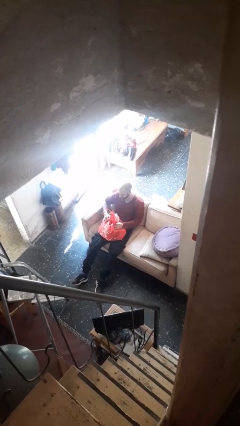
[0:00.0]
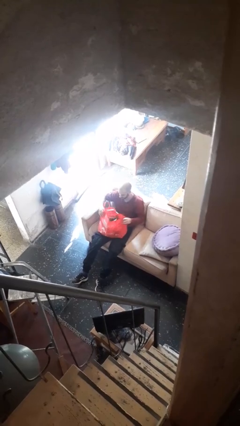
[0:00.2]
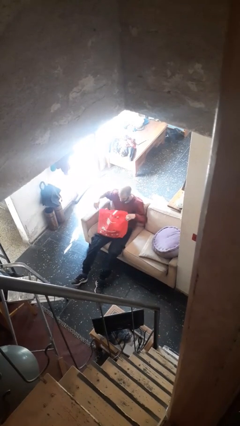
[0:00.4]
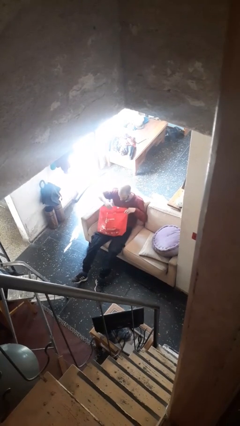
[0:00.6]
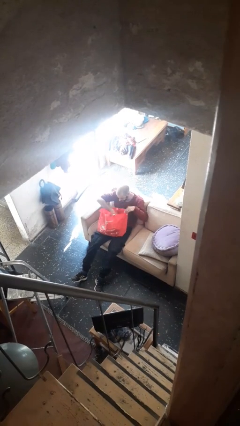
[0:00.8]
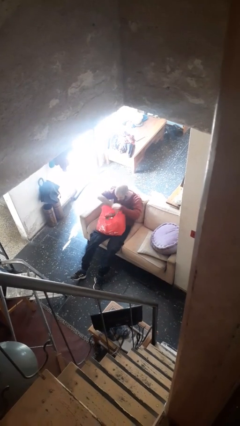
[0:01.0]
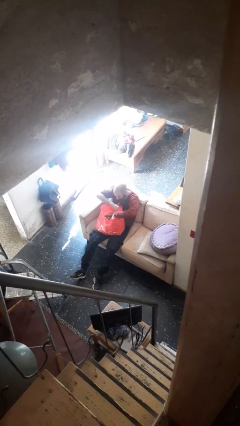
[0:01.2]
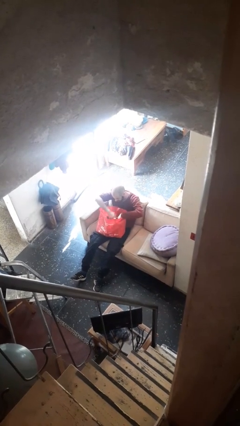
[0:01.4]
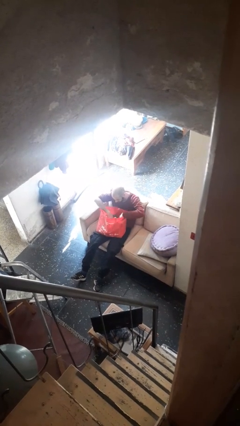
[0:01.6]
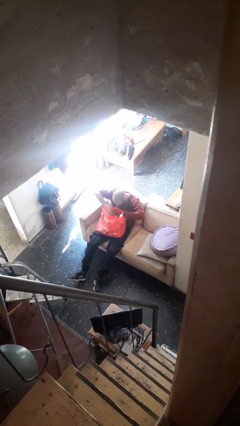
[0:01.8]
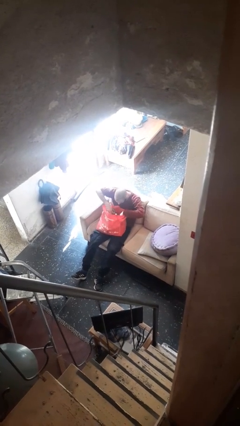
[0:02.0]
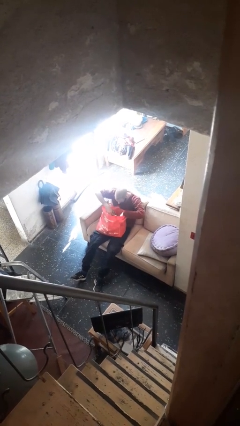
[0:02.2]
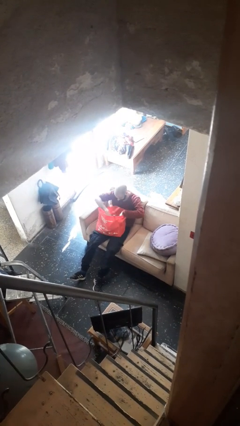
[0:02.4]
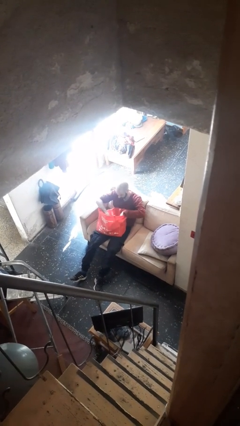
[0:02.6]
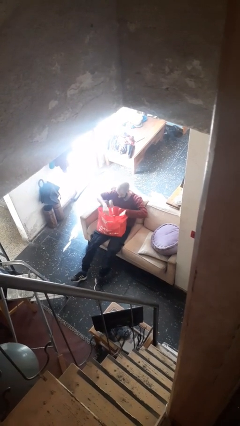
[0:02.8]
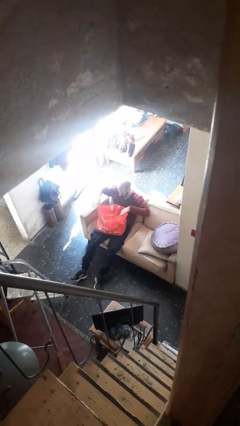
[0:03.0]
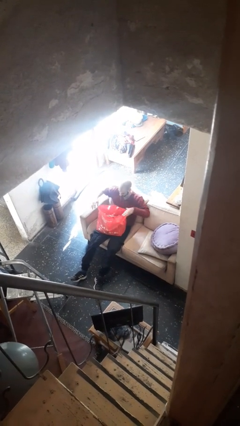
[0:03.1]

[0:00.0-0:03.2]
person searches in bag

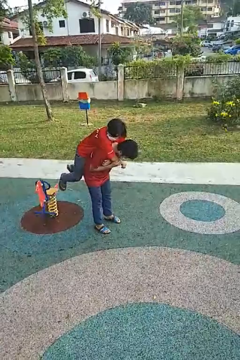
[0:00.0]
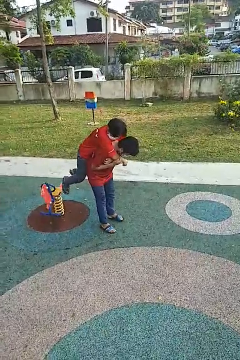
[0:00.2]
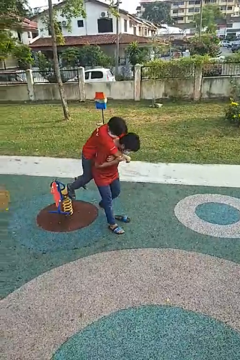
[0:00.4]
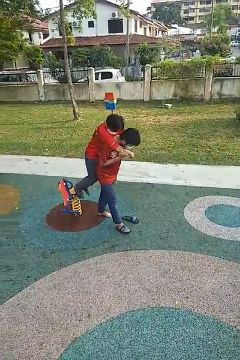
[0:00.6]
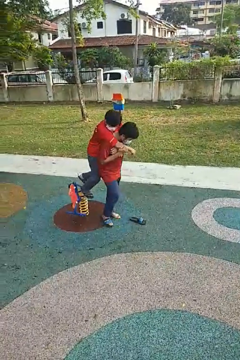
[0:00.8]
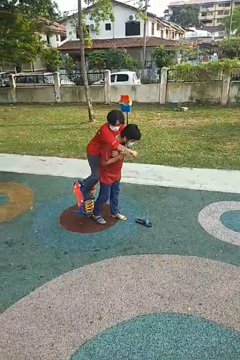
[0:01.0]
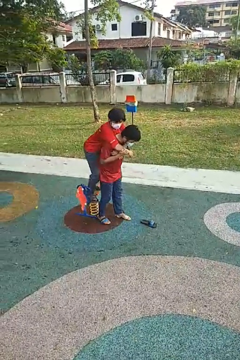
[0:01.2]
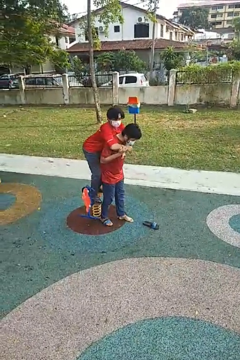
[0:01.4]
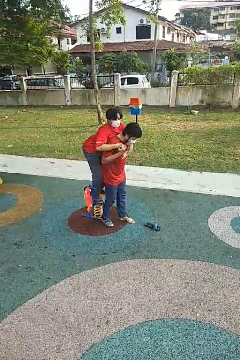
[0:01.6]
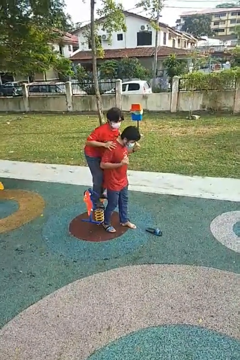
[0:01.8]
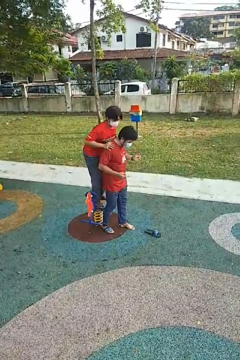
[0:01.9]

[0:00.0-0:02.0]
person puts down person

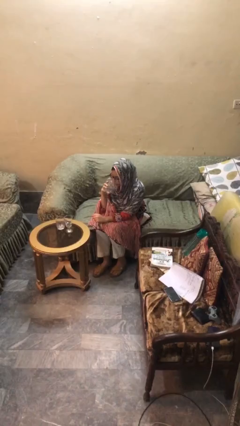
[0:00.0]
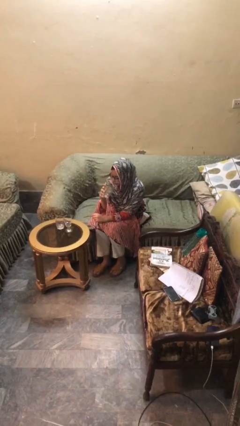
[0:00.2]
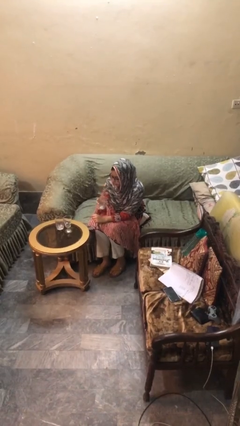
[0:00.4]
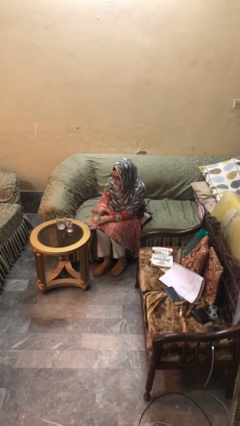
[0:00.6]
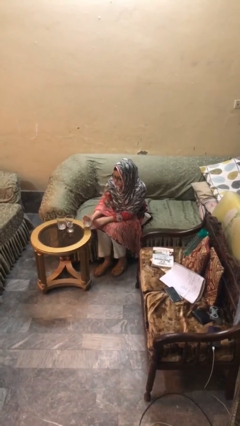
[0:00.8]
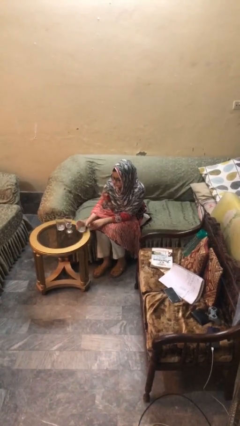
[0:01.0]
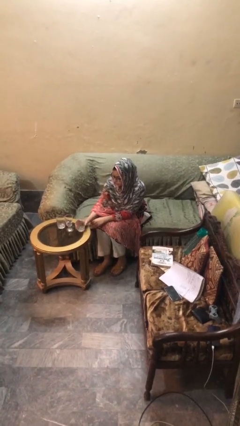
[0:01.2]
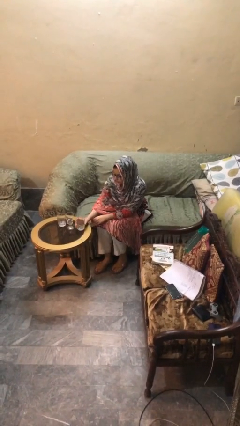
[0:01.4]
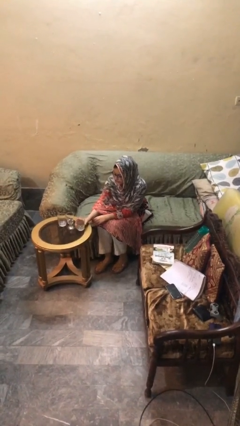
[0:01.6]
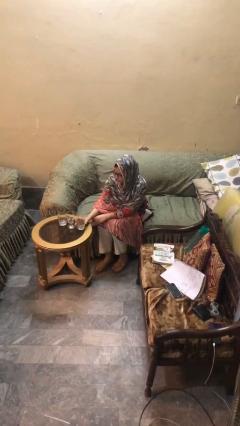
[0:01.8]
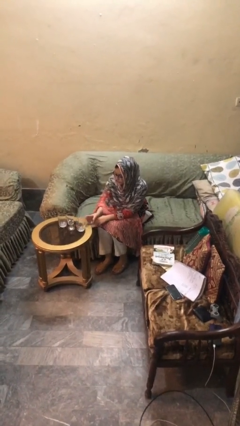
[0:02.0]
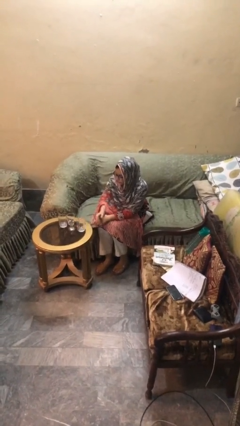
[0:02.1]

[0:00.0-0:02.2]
person puts down object on table

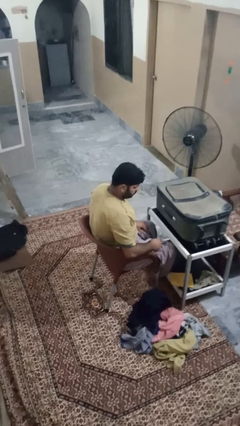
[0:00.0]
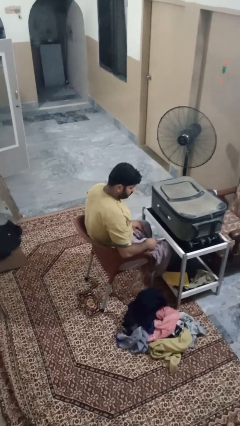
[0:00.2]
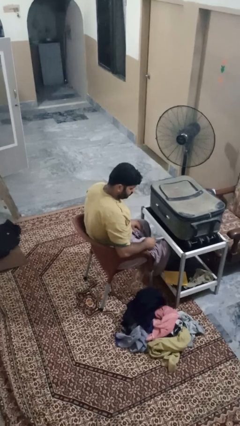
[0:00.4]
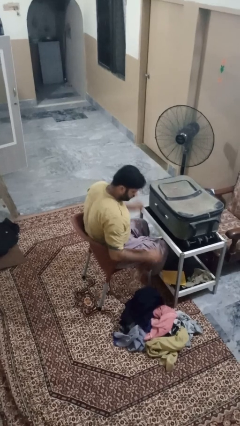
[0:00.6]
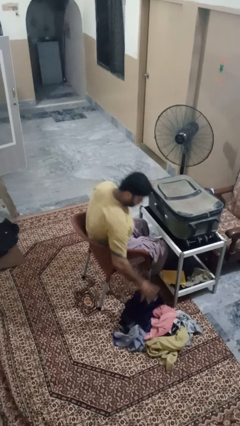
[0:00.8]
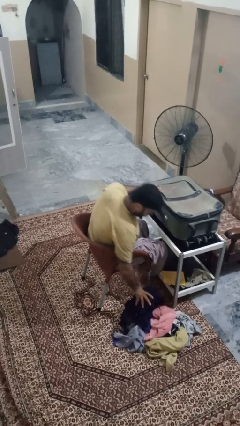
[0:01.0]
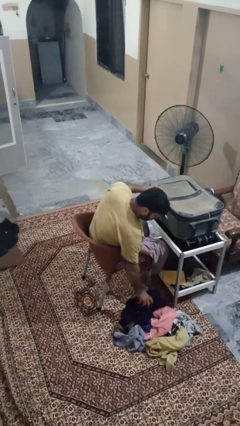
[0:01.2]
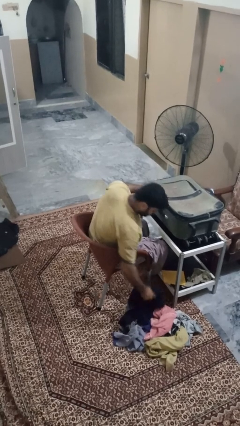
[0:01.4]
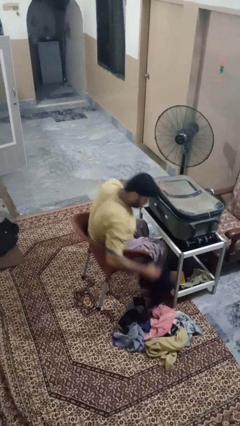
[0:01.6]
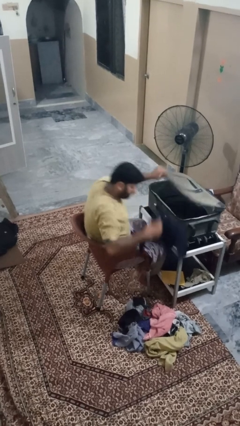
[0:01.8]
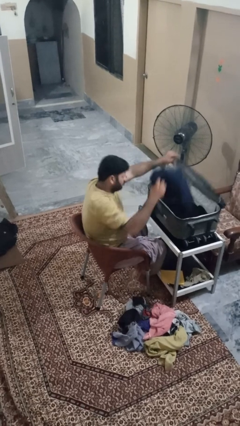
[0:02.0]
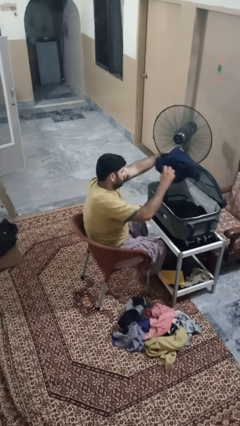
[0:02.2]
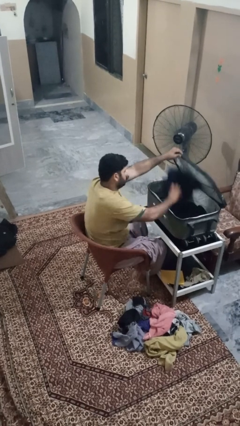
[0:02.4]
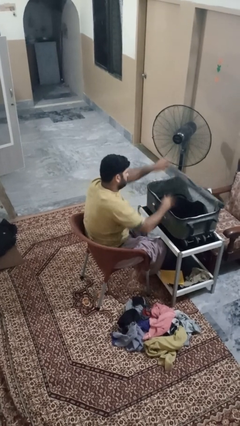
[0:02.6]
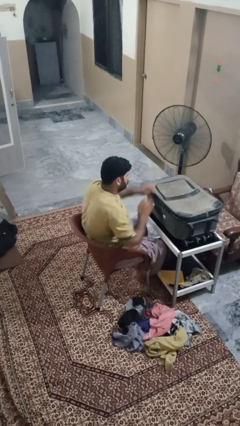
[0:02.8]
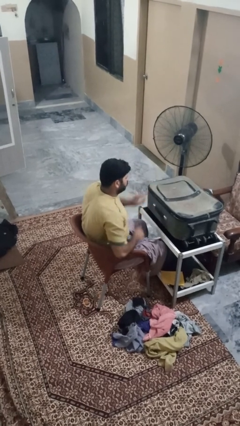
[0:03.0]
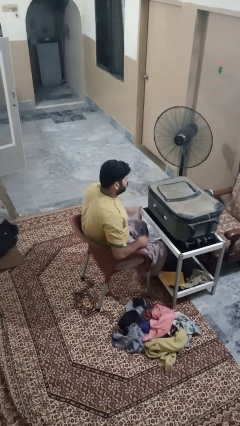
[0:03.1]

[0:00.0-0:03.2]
person loads clothes into suitcase

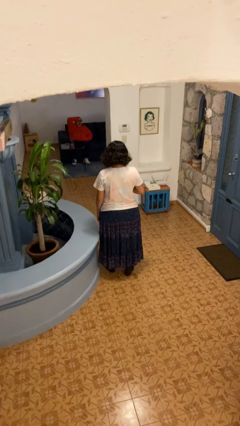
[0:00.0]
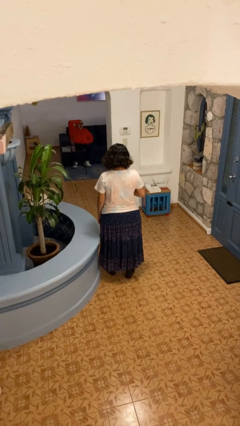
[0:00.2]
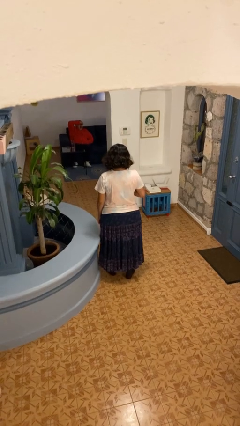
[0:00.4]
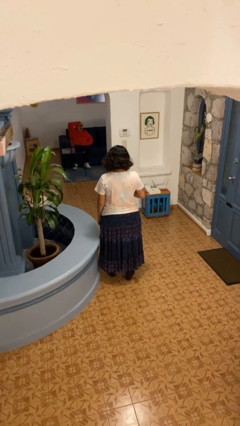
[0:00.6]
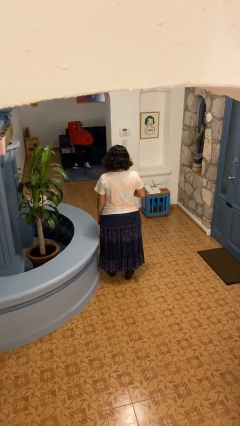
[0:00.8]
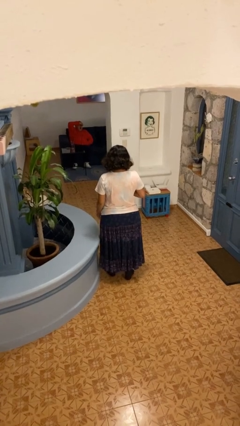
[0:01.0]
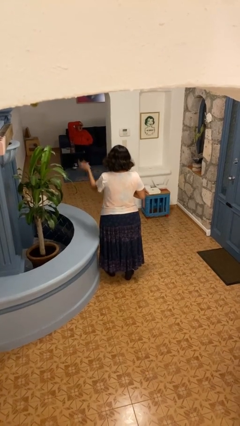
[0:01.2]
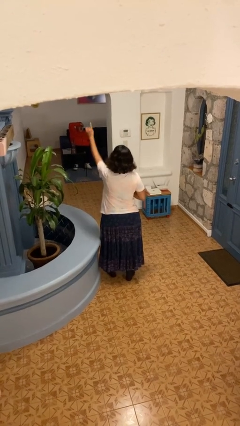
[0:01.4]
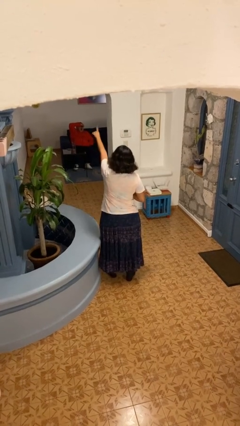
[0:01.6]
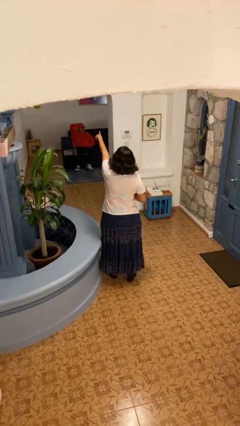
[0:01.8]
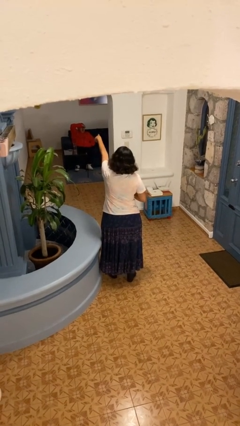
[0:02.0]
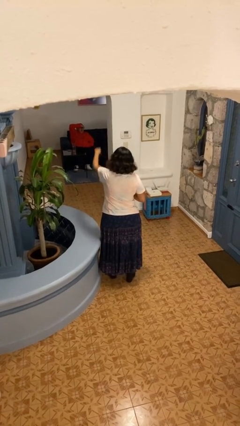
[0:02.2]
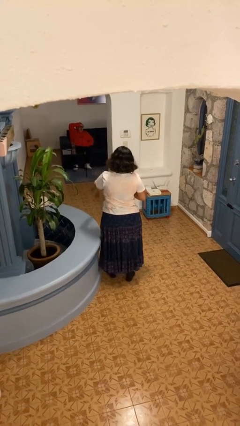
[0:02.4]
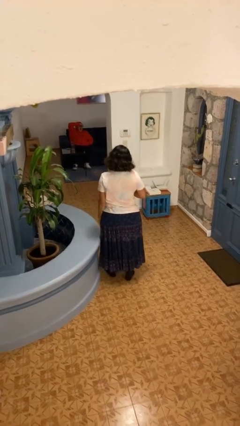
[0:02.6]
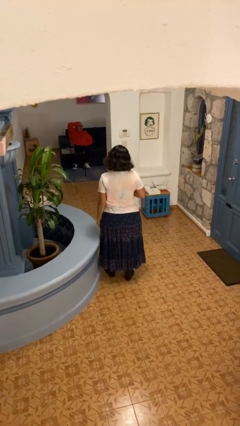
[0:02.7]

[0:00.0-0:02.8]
person points at person

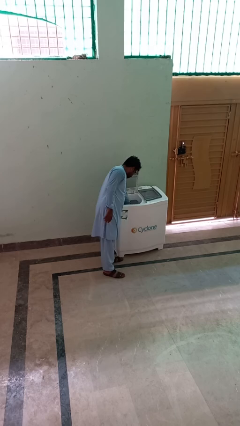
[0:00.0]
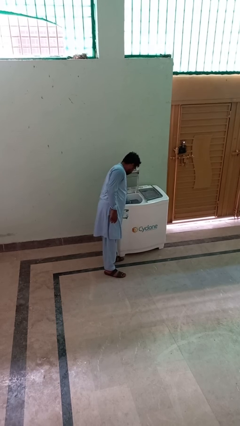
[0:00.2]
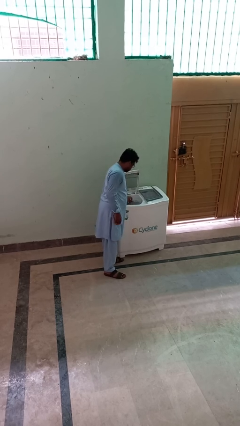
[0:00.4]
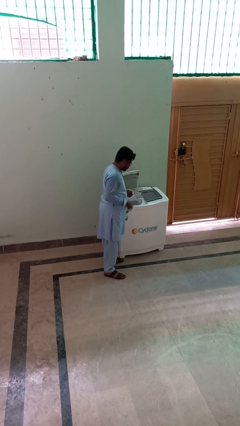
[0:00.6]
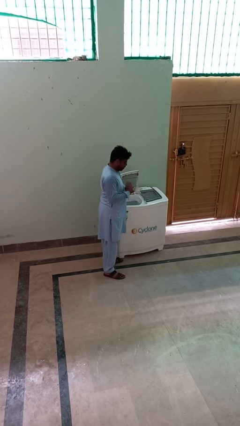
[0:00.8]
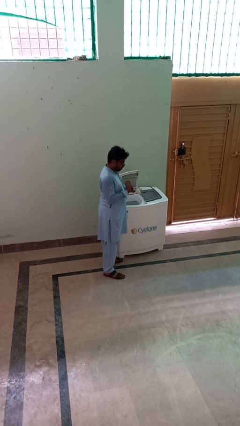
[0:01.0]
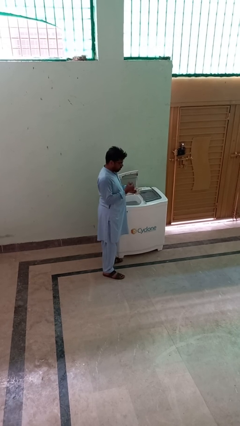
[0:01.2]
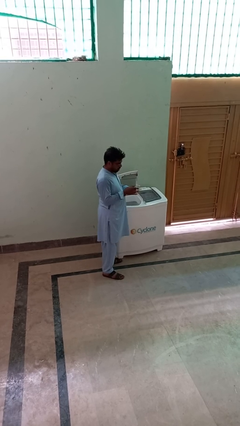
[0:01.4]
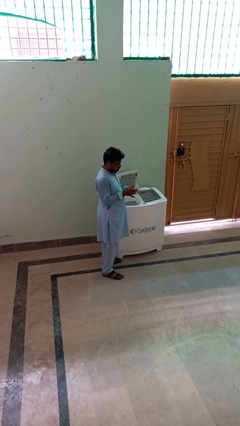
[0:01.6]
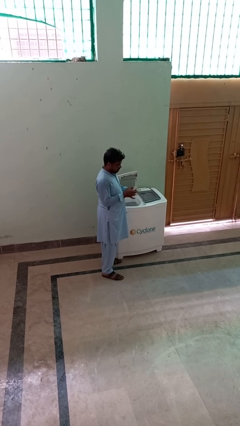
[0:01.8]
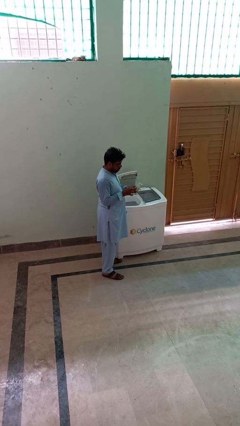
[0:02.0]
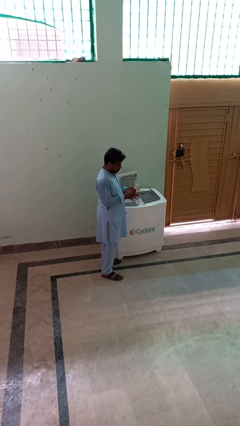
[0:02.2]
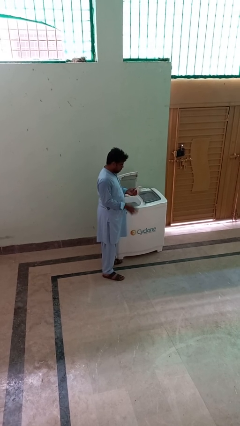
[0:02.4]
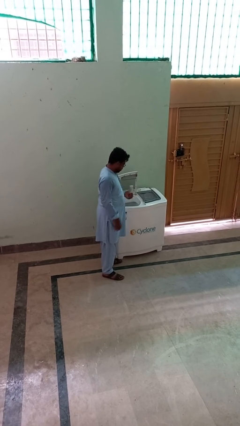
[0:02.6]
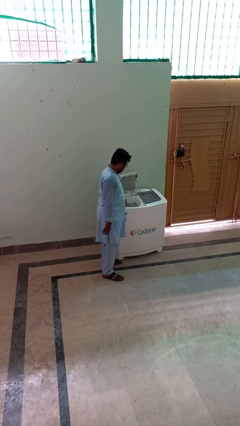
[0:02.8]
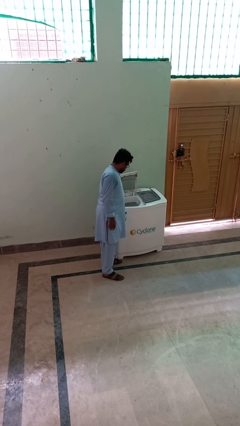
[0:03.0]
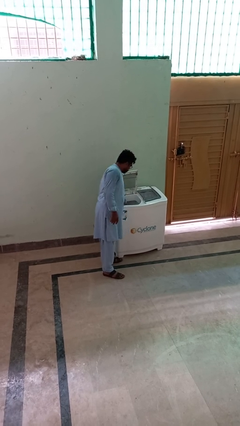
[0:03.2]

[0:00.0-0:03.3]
person cleans dryer lint trap

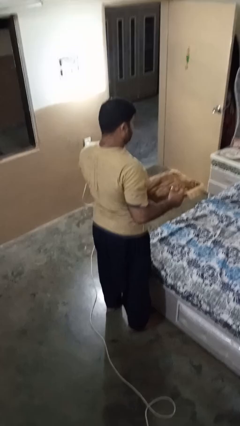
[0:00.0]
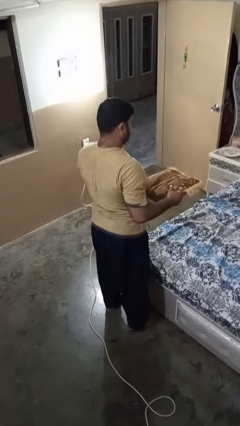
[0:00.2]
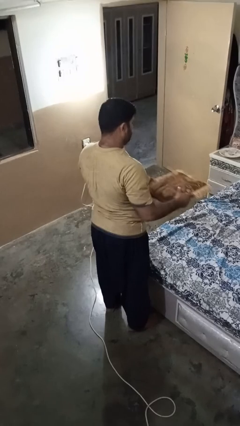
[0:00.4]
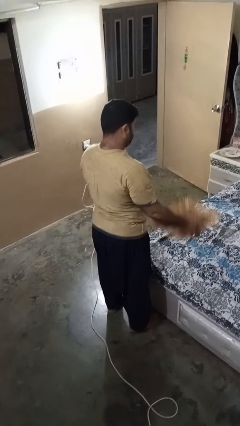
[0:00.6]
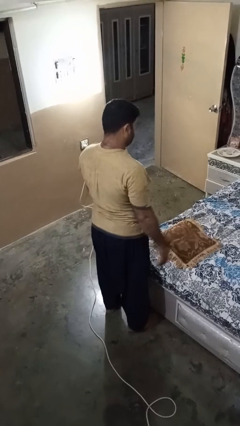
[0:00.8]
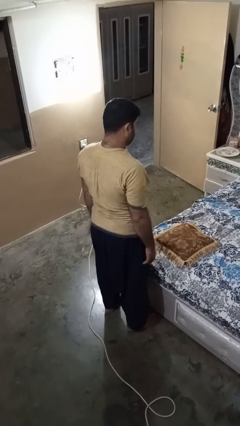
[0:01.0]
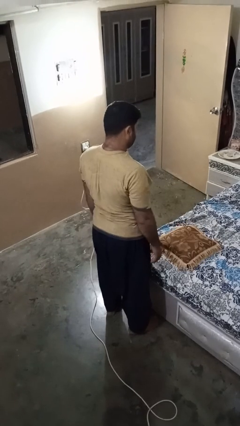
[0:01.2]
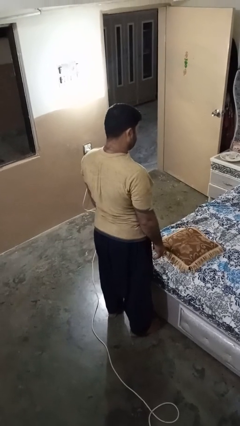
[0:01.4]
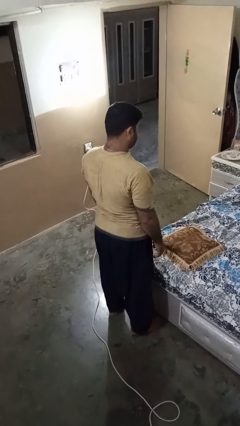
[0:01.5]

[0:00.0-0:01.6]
person puts down object on bed
